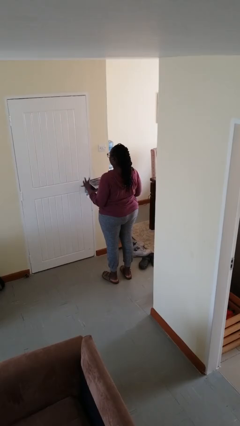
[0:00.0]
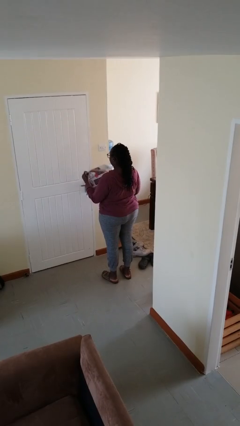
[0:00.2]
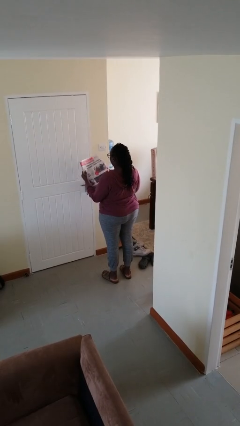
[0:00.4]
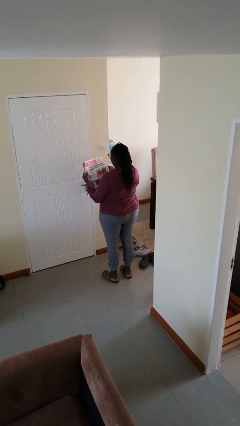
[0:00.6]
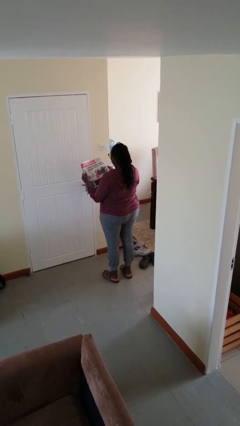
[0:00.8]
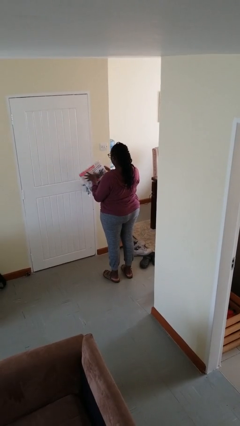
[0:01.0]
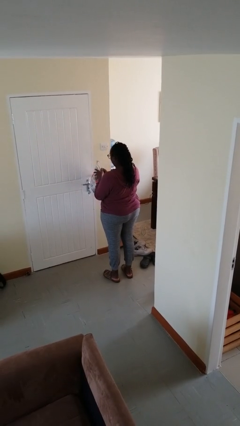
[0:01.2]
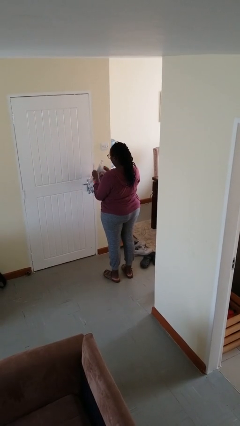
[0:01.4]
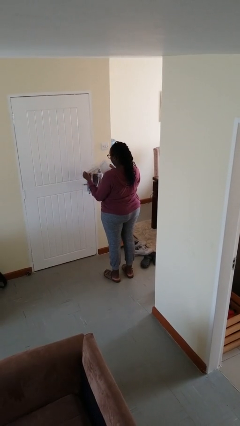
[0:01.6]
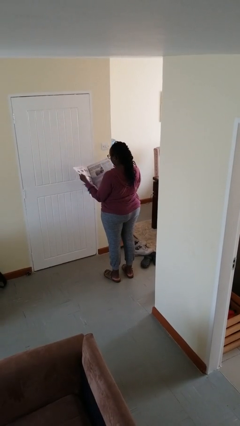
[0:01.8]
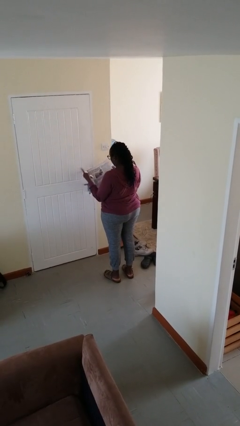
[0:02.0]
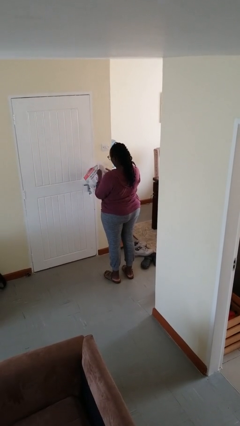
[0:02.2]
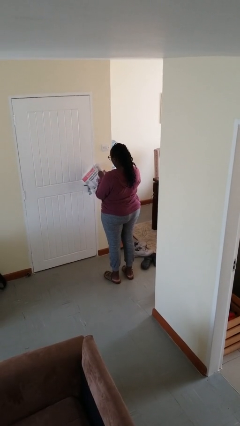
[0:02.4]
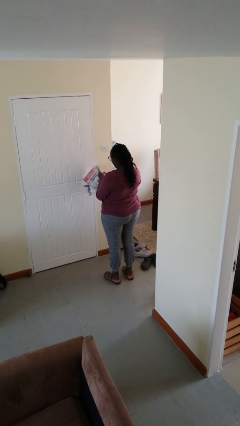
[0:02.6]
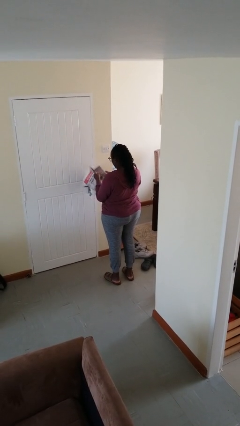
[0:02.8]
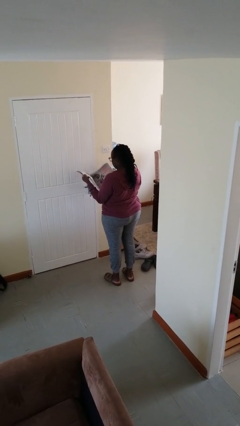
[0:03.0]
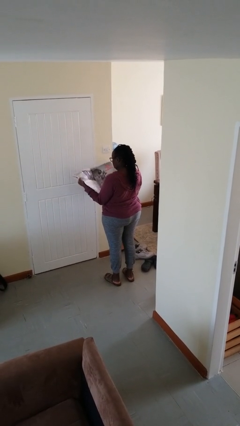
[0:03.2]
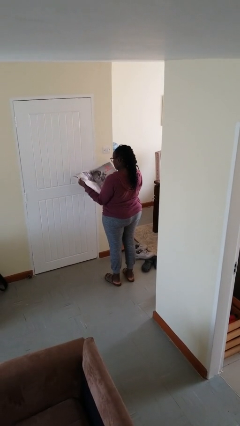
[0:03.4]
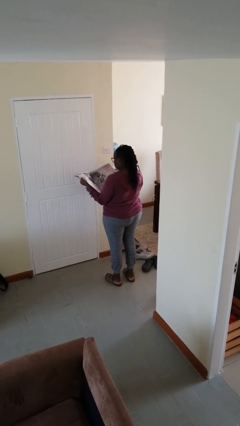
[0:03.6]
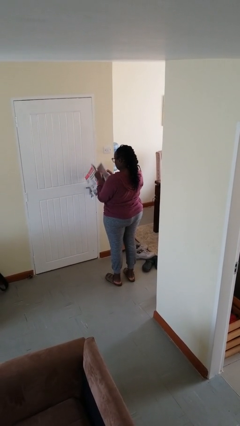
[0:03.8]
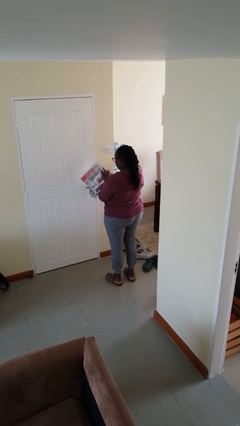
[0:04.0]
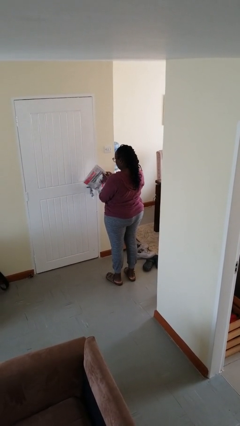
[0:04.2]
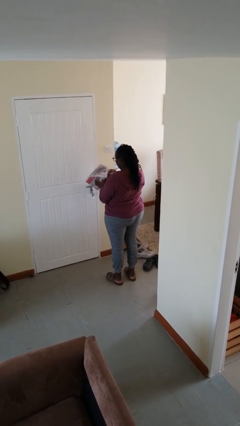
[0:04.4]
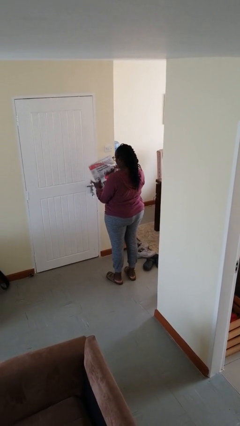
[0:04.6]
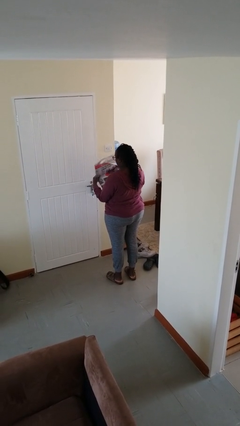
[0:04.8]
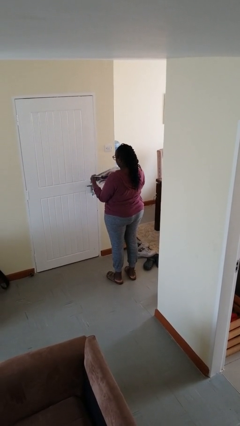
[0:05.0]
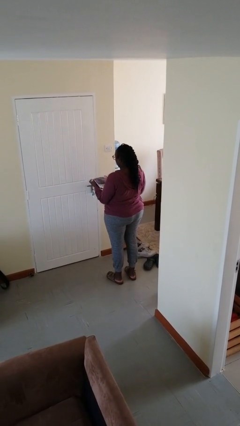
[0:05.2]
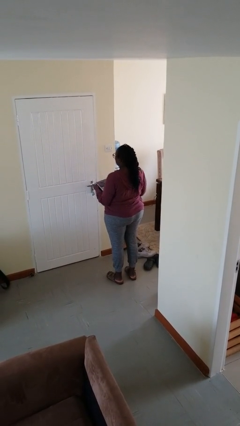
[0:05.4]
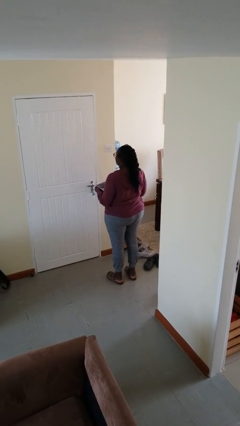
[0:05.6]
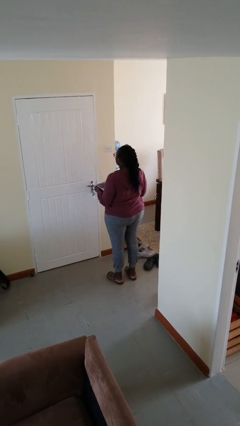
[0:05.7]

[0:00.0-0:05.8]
person reads newspaper

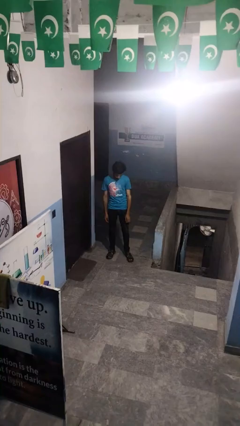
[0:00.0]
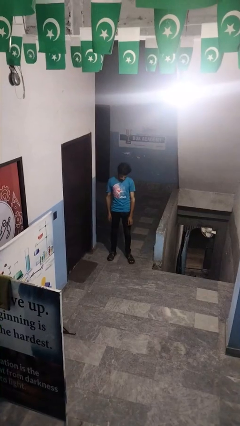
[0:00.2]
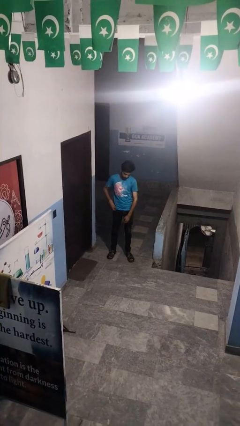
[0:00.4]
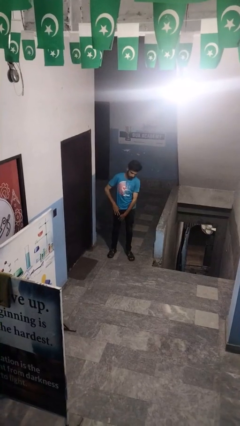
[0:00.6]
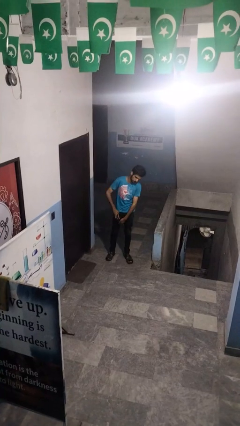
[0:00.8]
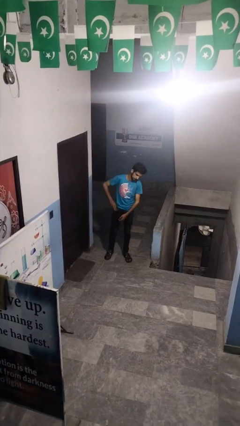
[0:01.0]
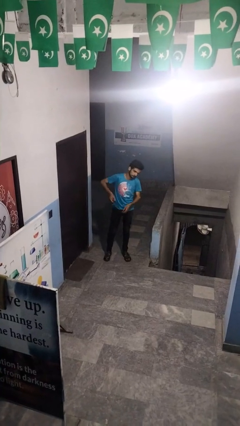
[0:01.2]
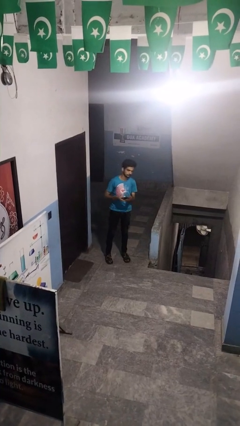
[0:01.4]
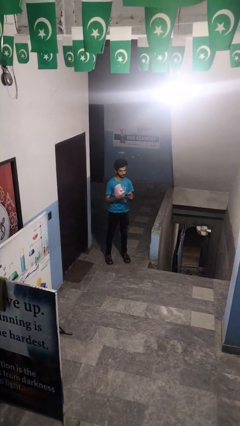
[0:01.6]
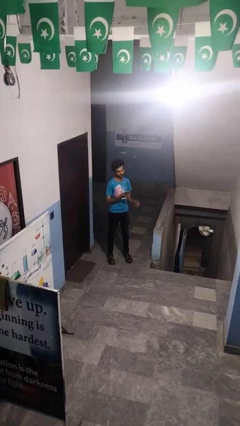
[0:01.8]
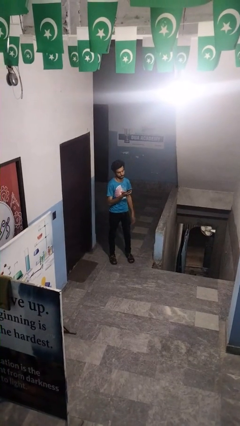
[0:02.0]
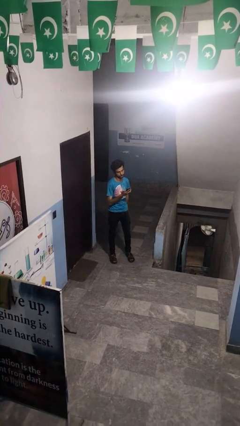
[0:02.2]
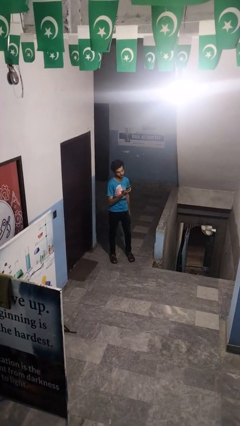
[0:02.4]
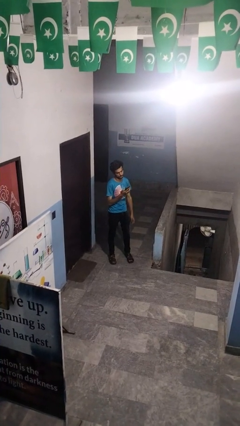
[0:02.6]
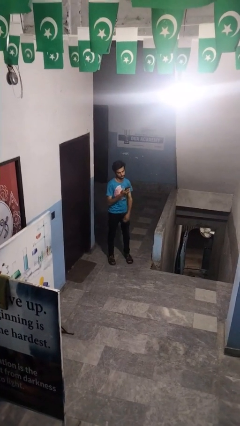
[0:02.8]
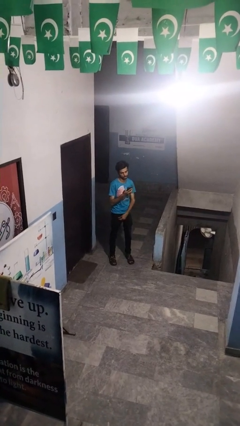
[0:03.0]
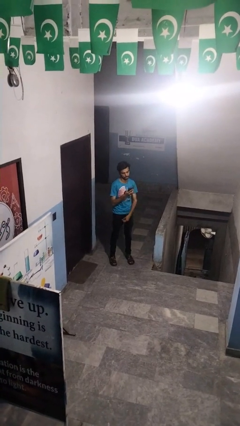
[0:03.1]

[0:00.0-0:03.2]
person takes phone from pocket

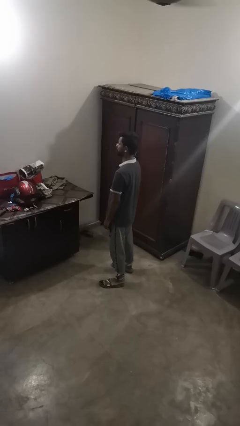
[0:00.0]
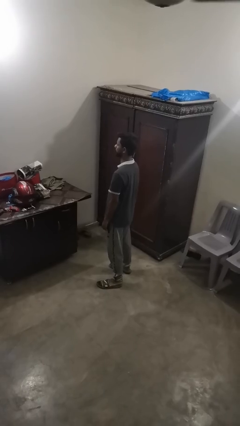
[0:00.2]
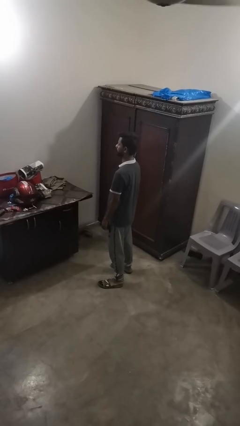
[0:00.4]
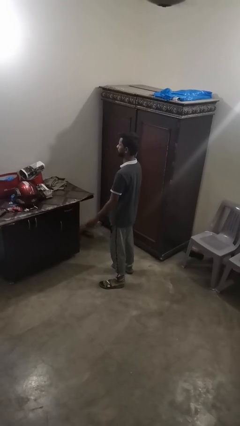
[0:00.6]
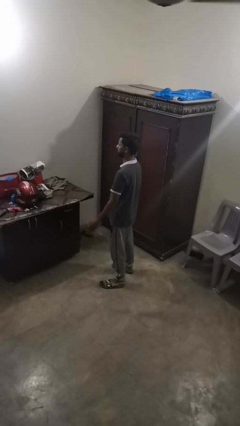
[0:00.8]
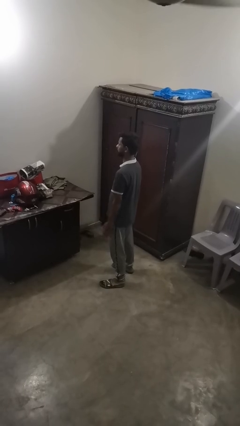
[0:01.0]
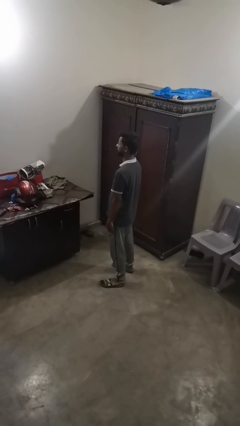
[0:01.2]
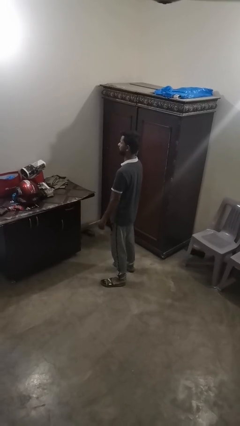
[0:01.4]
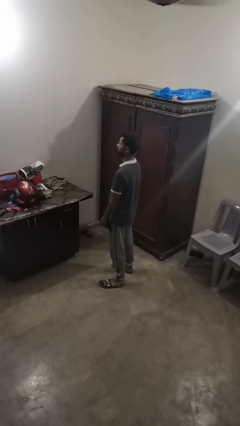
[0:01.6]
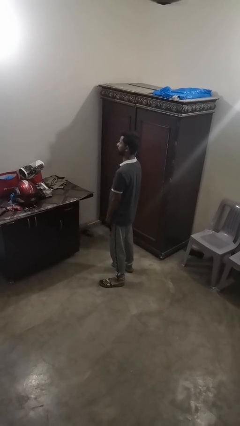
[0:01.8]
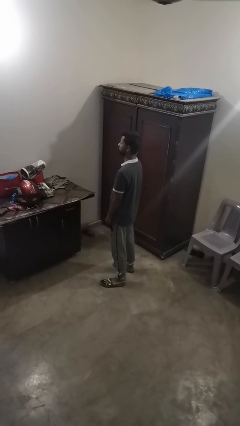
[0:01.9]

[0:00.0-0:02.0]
person slaps hands on thighs

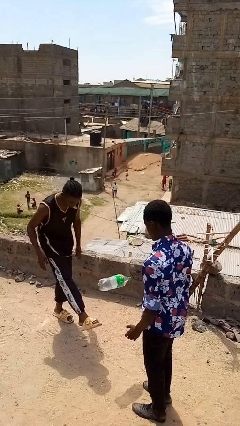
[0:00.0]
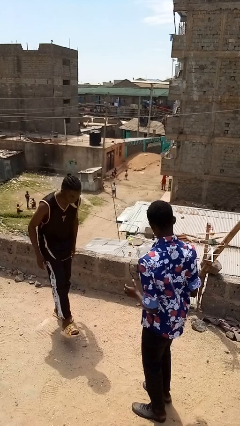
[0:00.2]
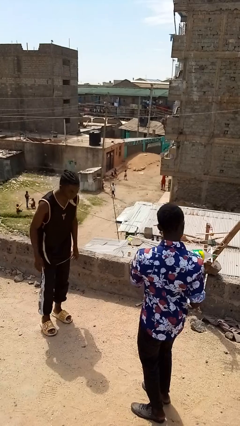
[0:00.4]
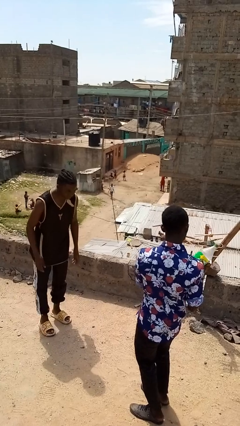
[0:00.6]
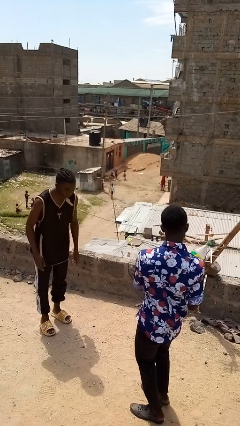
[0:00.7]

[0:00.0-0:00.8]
person kicks object to person

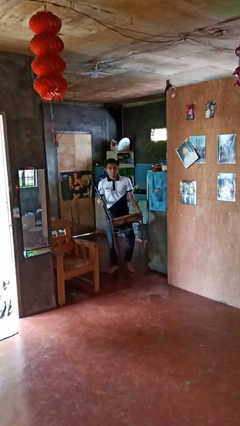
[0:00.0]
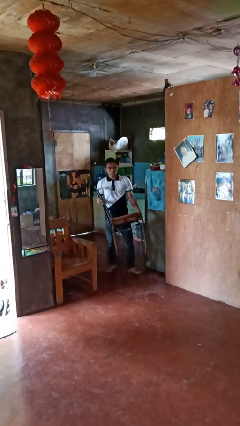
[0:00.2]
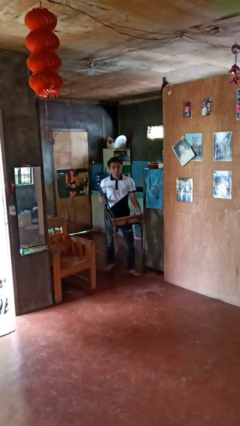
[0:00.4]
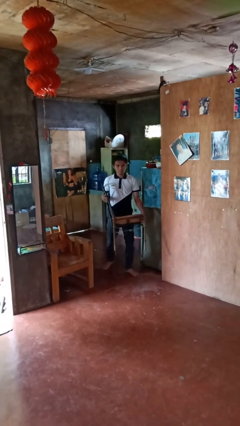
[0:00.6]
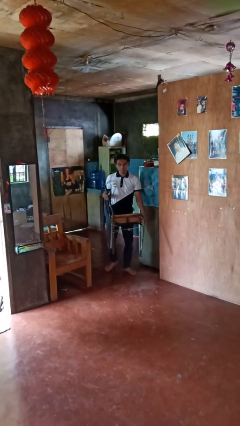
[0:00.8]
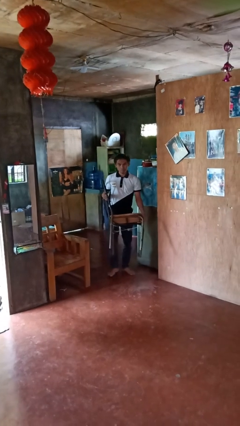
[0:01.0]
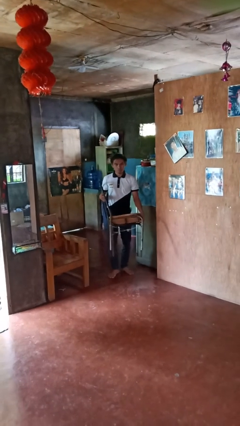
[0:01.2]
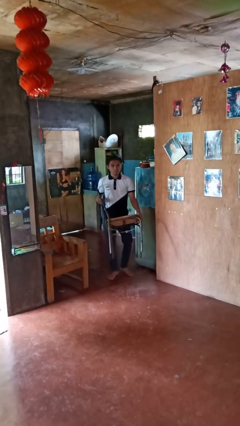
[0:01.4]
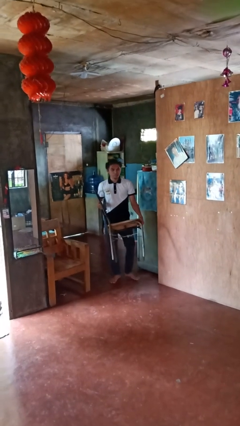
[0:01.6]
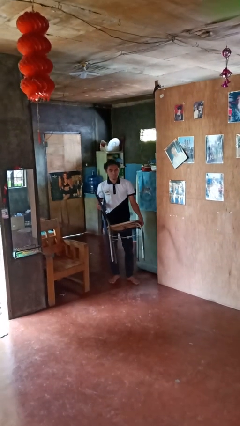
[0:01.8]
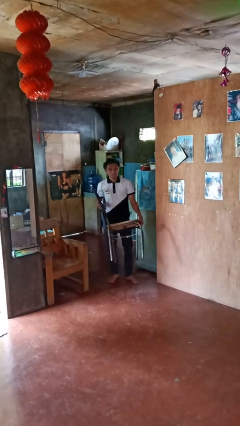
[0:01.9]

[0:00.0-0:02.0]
person carries furniture

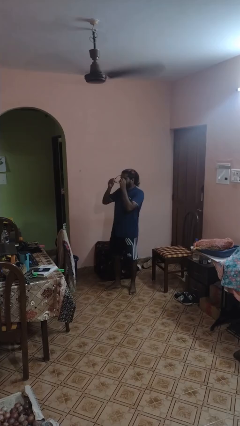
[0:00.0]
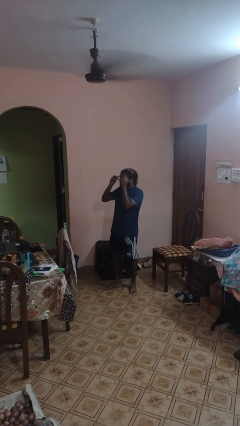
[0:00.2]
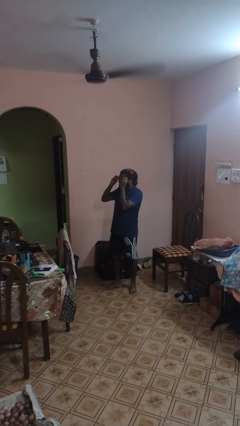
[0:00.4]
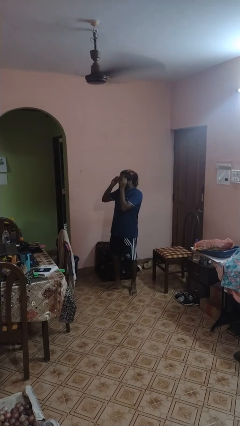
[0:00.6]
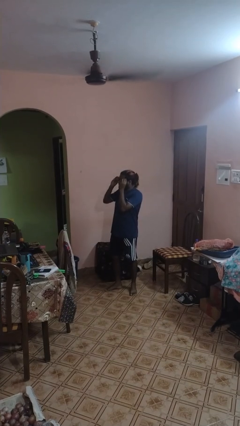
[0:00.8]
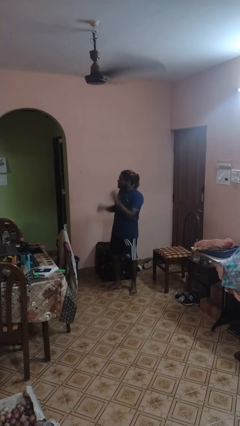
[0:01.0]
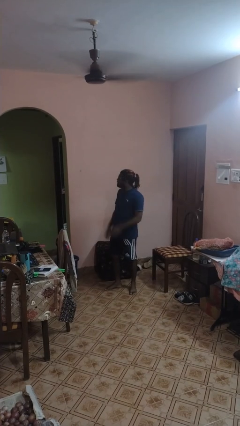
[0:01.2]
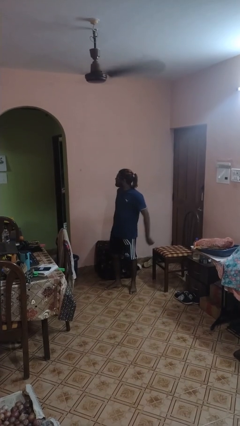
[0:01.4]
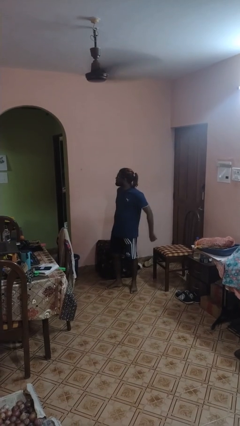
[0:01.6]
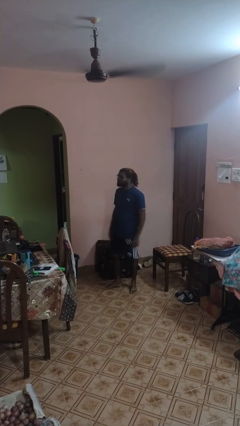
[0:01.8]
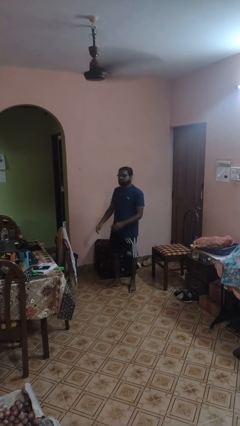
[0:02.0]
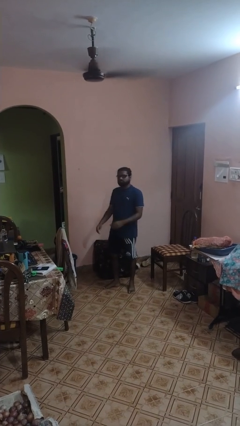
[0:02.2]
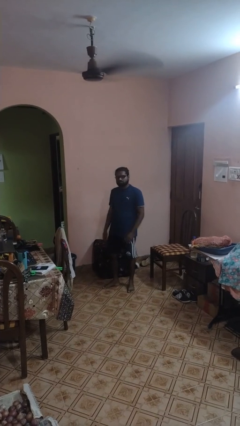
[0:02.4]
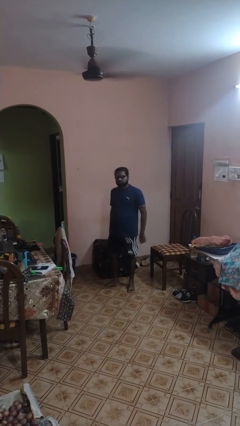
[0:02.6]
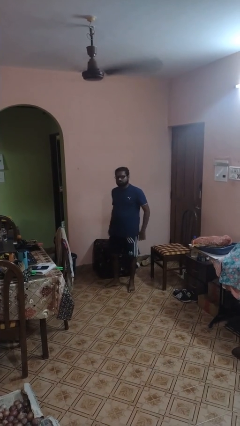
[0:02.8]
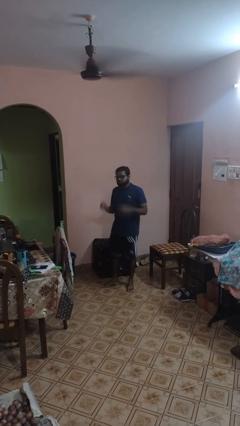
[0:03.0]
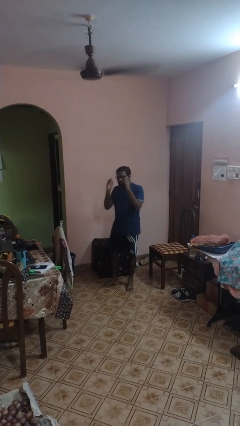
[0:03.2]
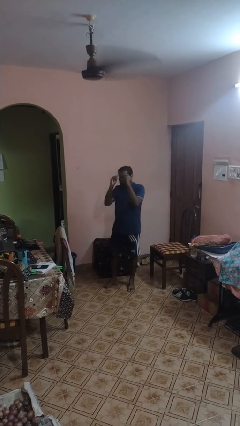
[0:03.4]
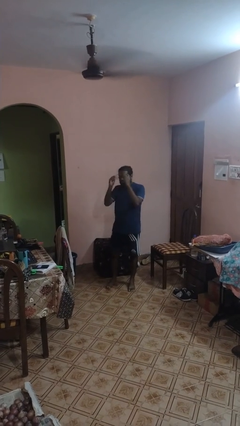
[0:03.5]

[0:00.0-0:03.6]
person puts on glasses

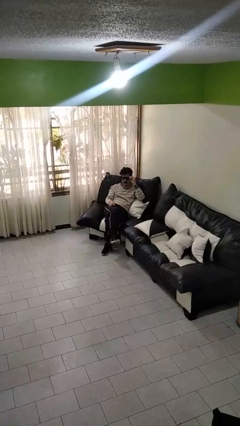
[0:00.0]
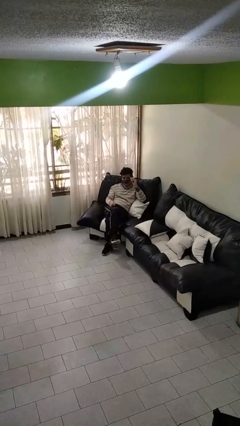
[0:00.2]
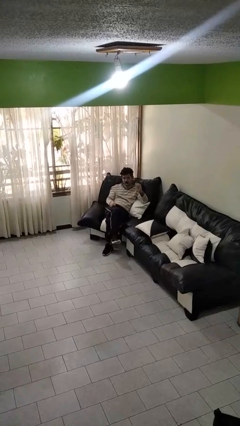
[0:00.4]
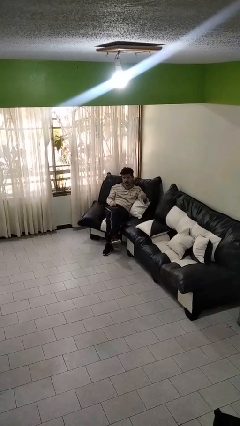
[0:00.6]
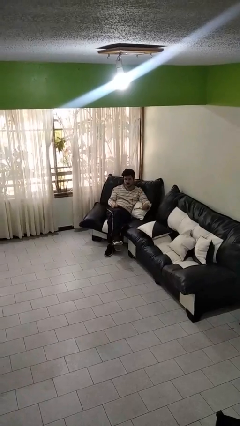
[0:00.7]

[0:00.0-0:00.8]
person takes off sunglasses
